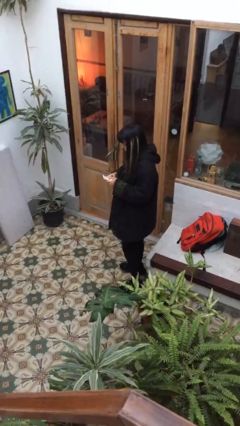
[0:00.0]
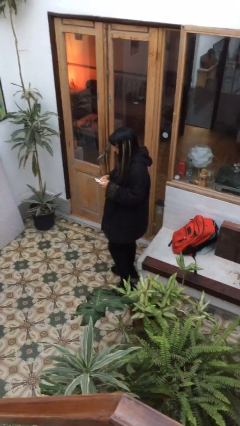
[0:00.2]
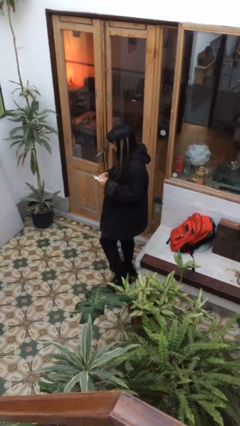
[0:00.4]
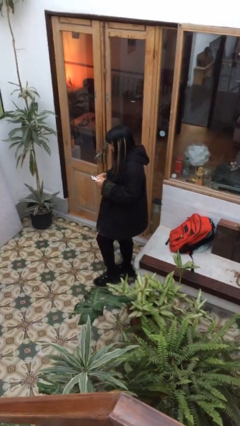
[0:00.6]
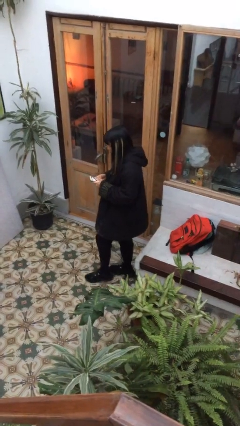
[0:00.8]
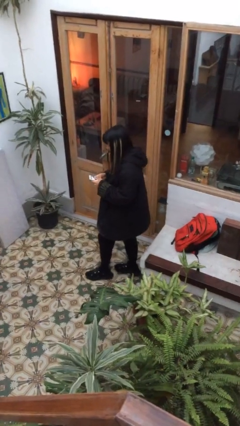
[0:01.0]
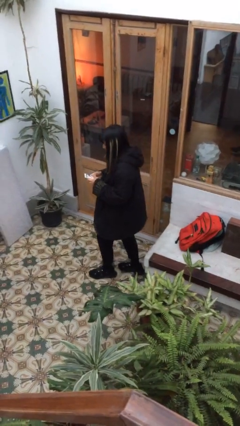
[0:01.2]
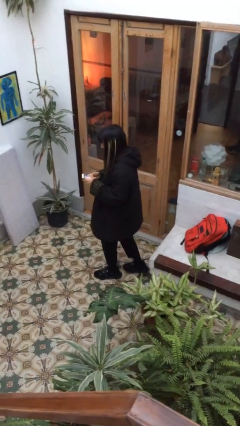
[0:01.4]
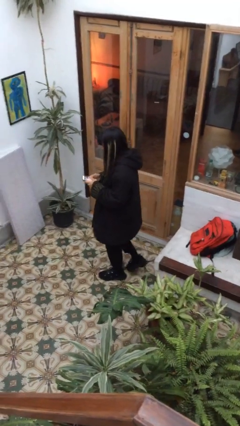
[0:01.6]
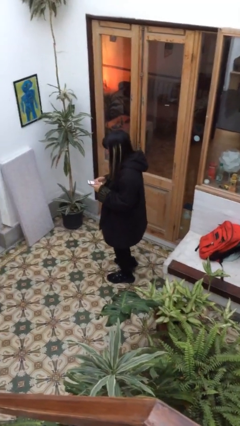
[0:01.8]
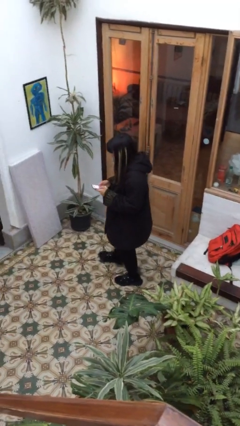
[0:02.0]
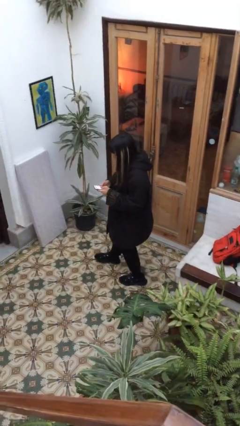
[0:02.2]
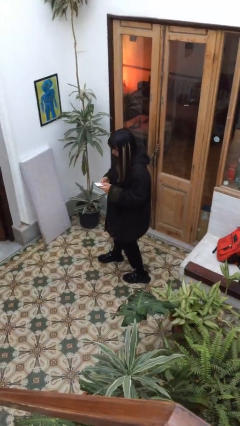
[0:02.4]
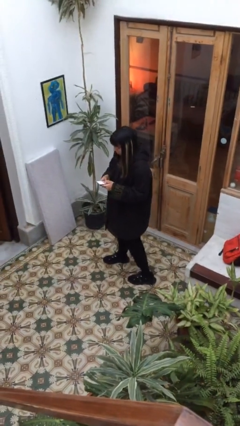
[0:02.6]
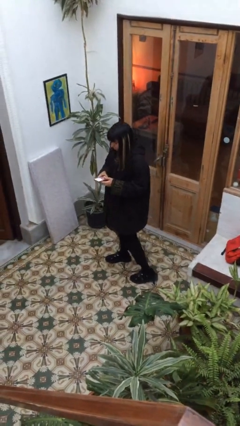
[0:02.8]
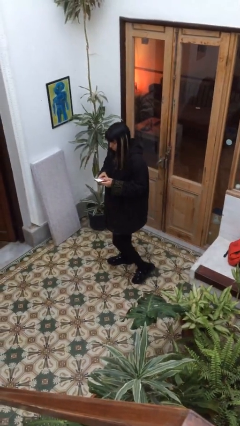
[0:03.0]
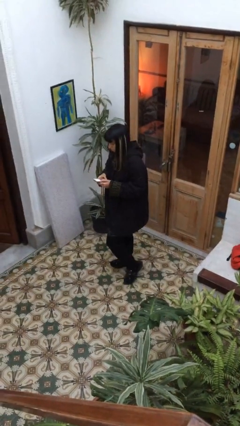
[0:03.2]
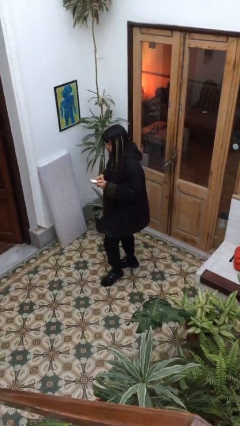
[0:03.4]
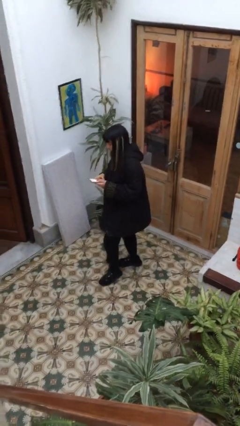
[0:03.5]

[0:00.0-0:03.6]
person texts on phone

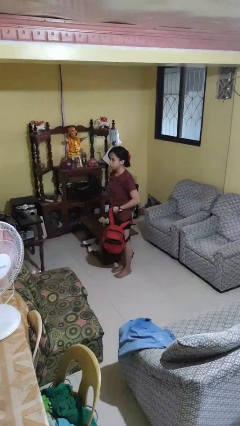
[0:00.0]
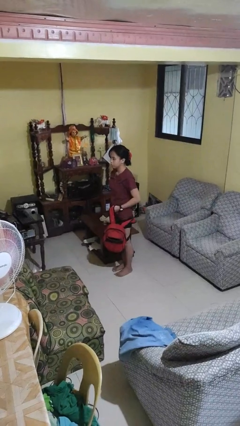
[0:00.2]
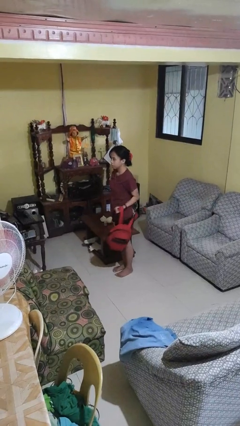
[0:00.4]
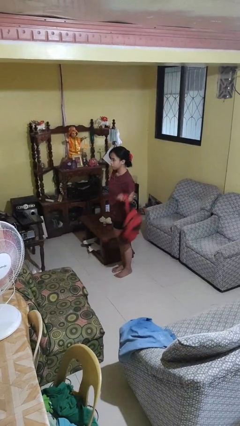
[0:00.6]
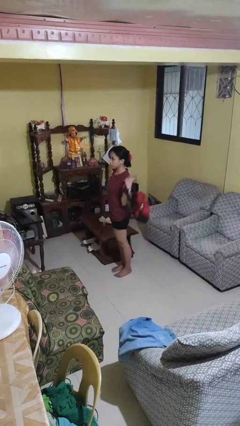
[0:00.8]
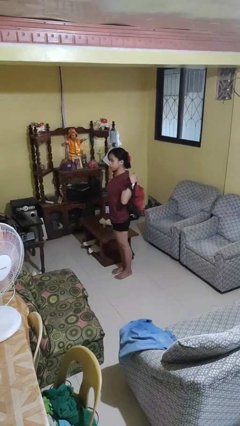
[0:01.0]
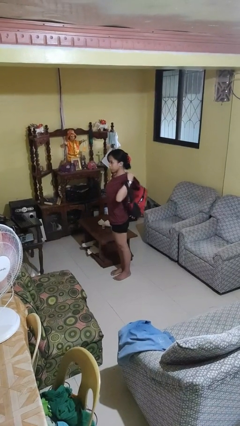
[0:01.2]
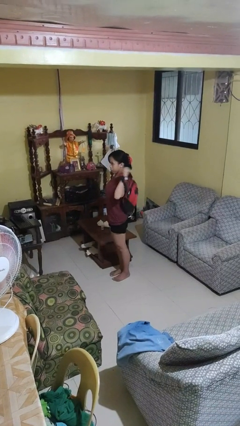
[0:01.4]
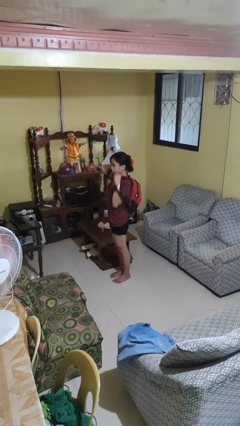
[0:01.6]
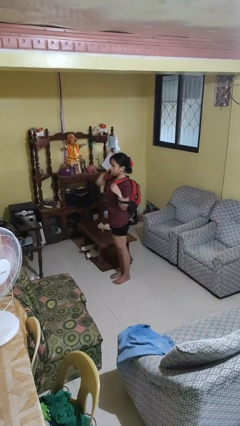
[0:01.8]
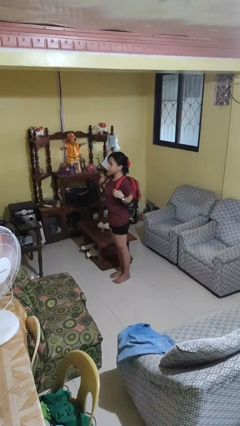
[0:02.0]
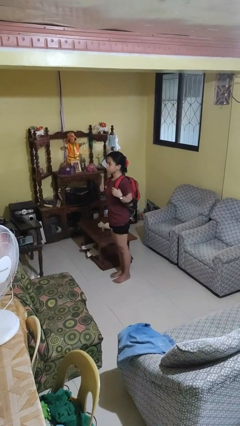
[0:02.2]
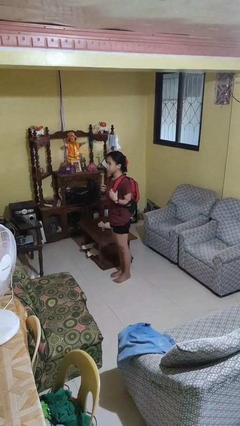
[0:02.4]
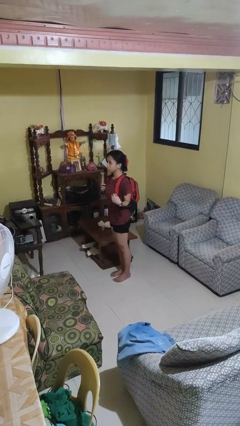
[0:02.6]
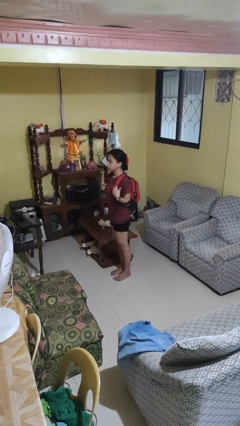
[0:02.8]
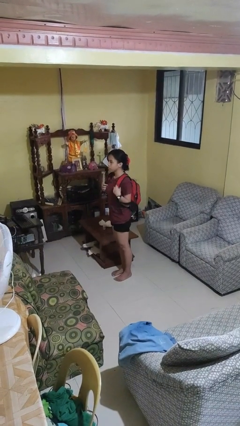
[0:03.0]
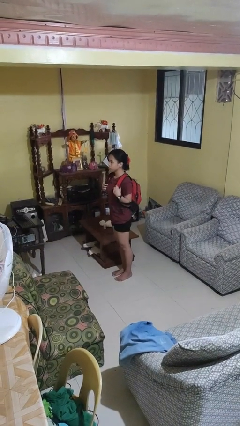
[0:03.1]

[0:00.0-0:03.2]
person puts on backpack

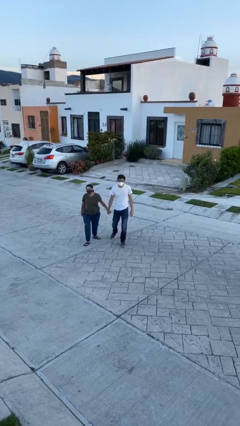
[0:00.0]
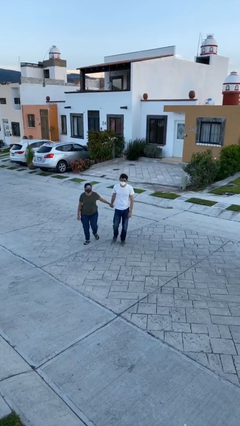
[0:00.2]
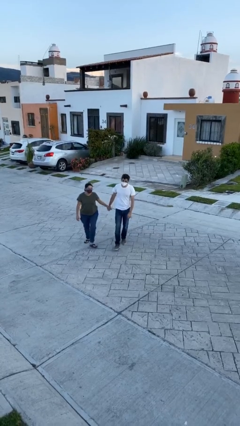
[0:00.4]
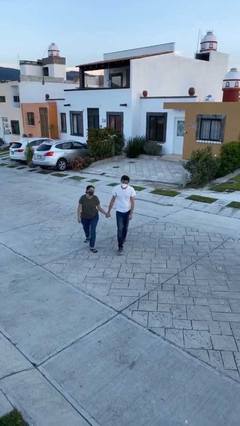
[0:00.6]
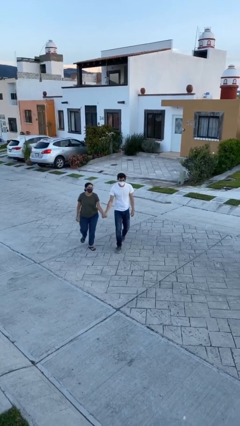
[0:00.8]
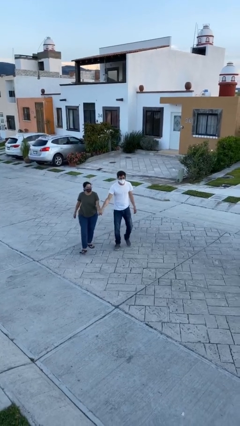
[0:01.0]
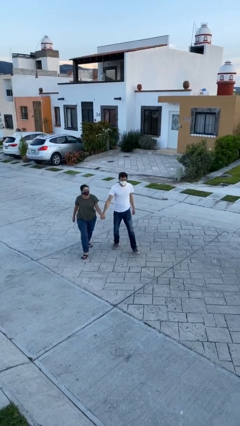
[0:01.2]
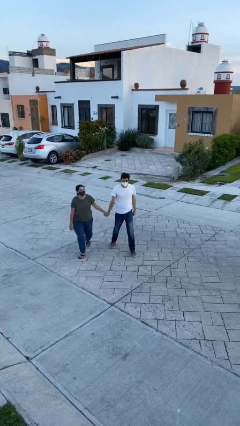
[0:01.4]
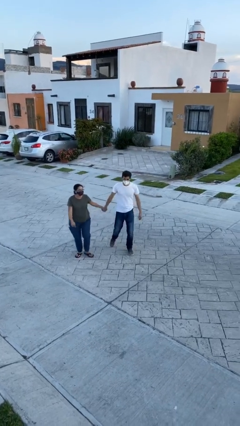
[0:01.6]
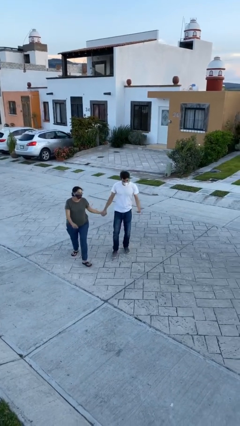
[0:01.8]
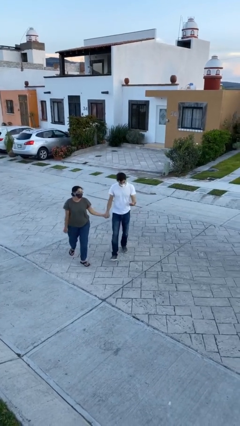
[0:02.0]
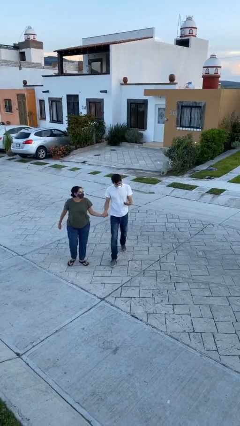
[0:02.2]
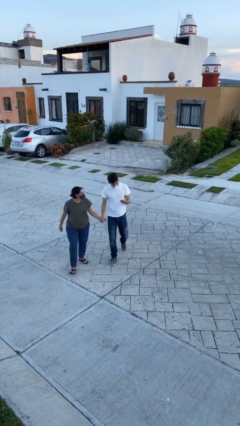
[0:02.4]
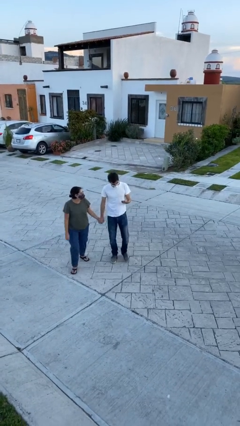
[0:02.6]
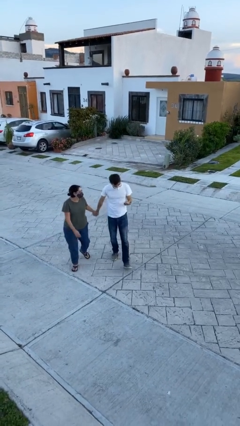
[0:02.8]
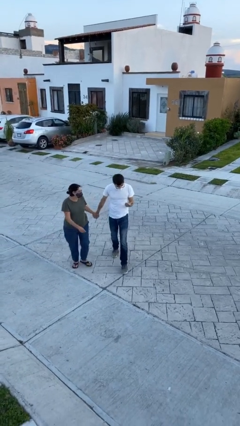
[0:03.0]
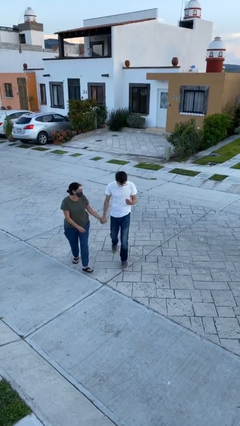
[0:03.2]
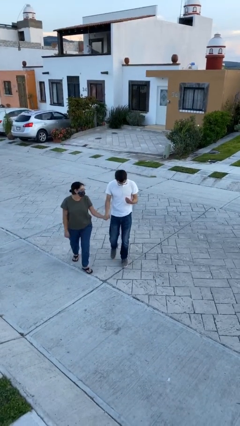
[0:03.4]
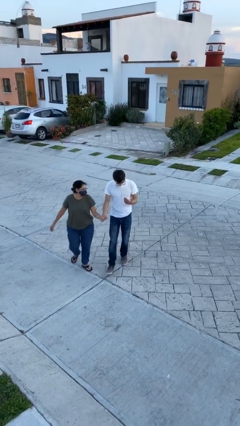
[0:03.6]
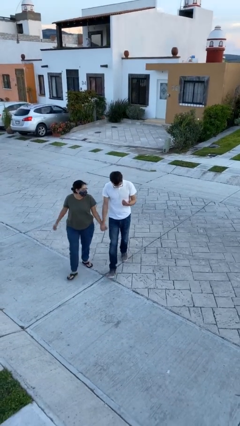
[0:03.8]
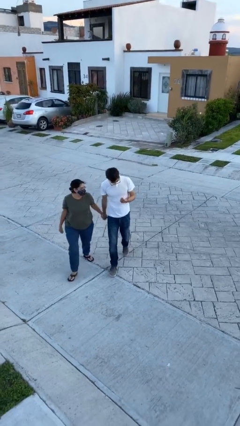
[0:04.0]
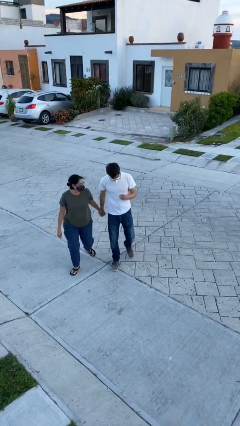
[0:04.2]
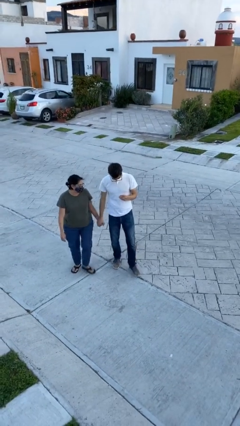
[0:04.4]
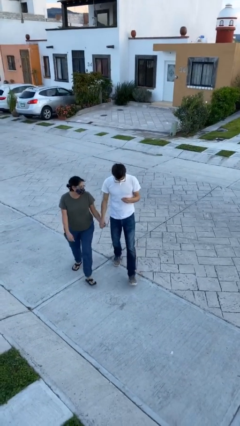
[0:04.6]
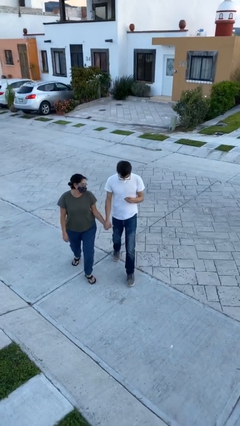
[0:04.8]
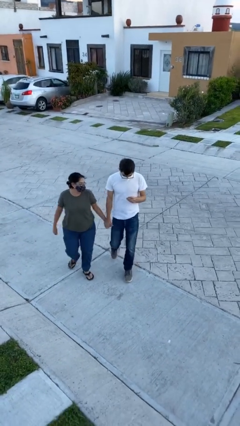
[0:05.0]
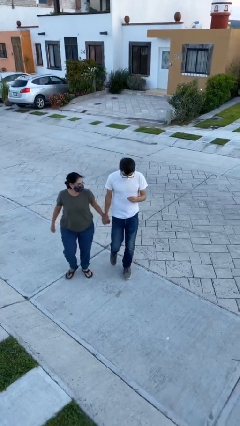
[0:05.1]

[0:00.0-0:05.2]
person holds hand

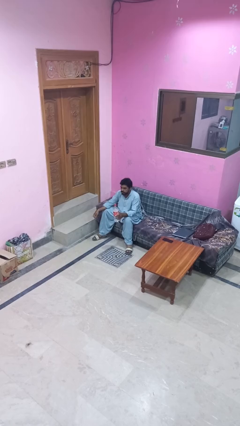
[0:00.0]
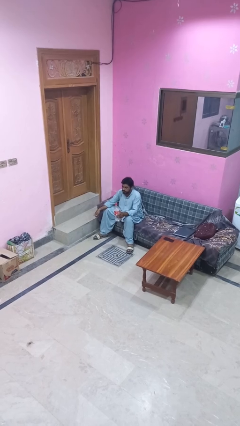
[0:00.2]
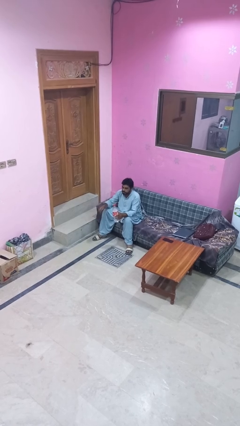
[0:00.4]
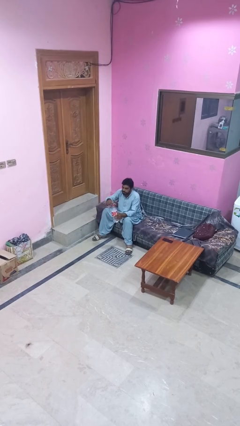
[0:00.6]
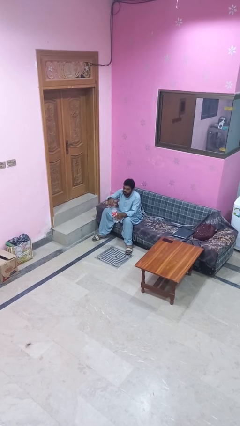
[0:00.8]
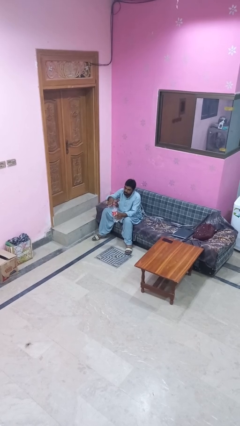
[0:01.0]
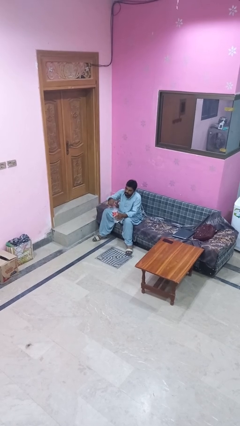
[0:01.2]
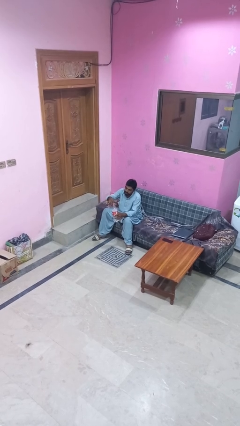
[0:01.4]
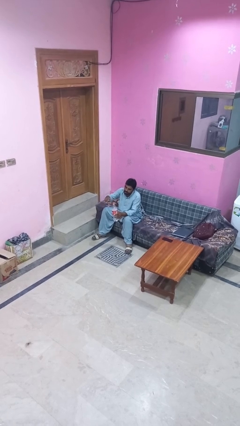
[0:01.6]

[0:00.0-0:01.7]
person unscrews lid from bottle

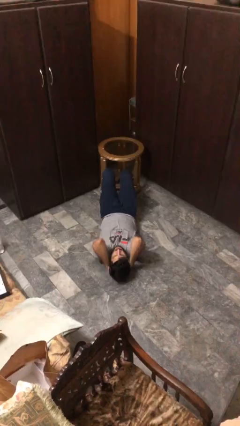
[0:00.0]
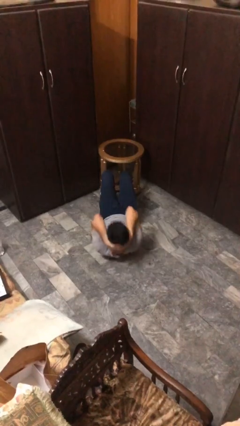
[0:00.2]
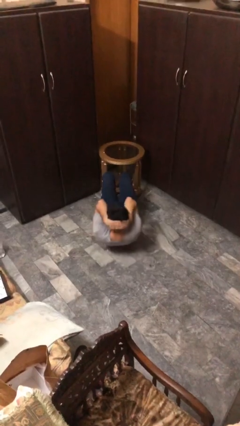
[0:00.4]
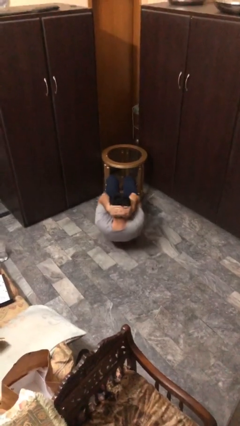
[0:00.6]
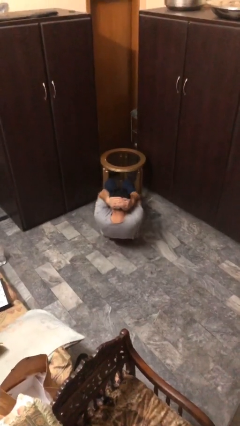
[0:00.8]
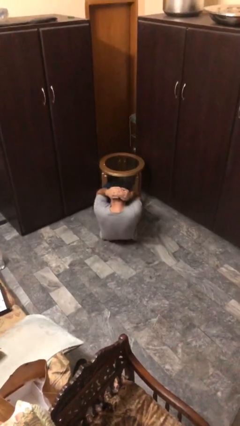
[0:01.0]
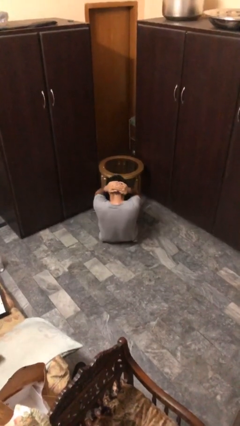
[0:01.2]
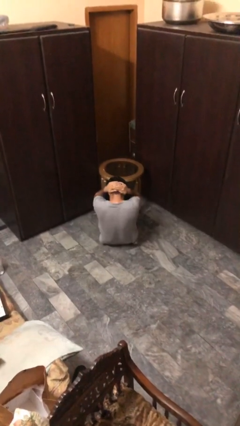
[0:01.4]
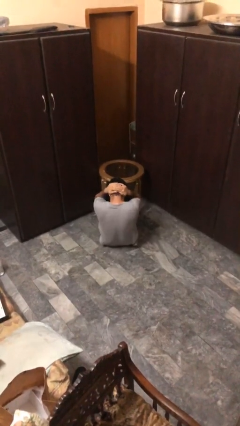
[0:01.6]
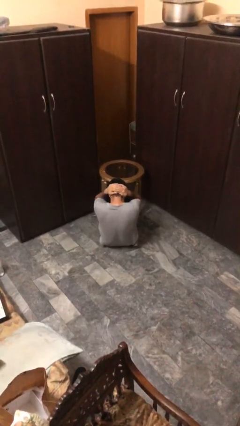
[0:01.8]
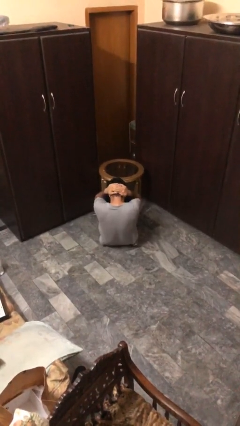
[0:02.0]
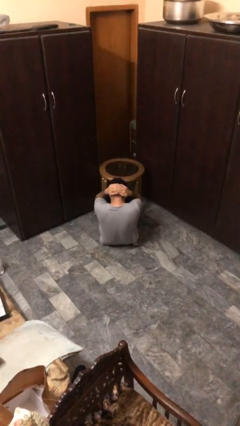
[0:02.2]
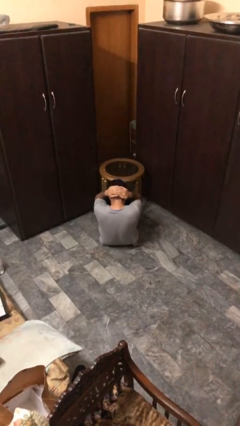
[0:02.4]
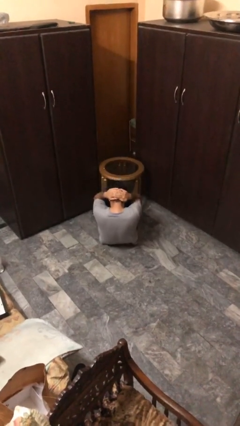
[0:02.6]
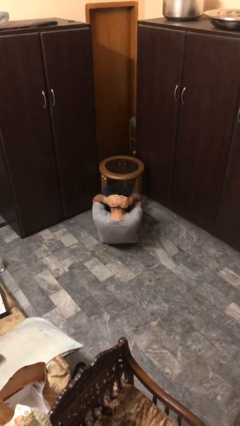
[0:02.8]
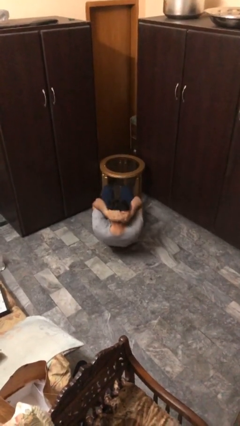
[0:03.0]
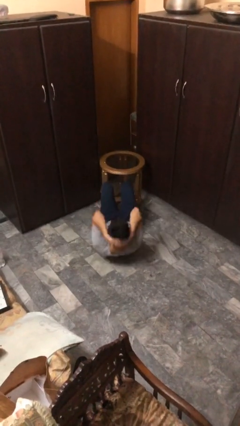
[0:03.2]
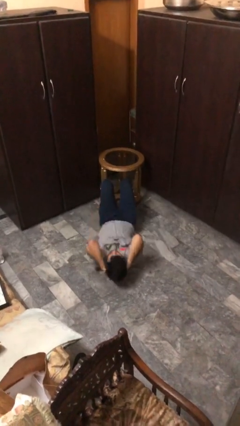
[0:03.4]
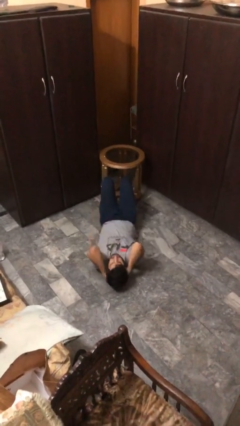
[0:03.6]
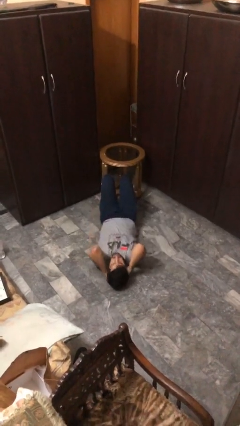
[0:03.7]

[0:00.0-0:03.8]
person exercises with situp
